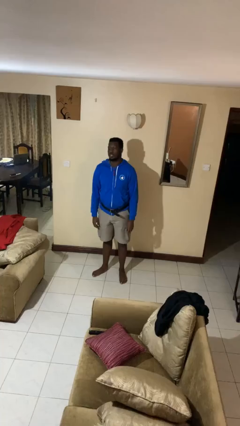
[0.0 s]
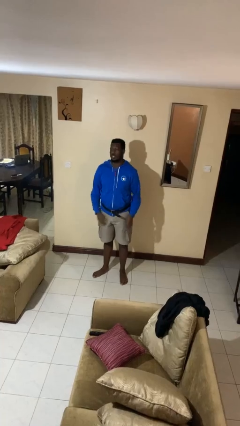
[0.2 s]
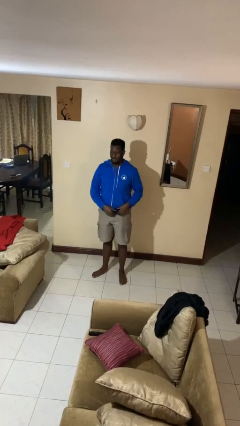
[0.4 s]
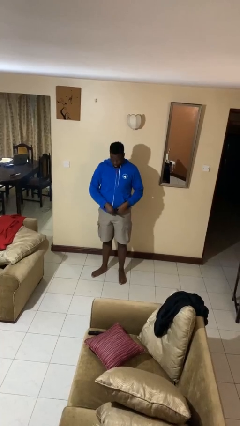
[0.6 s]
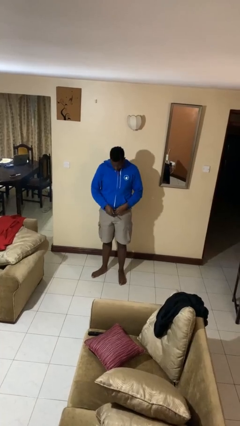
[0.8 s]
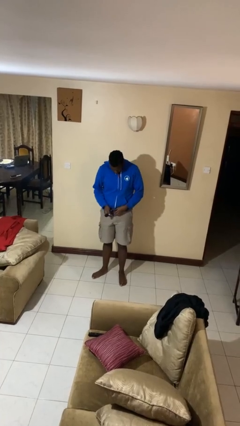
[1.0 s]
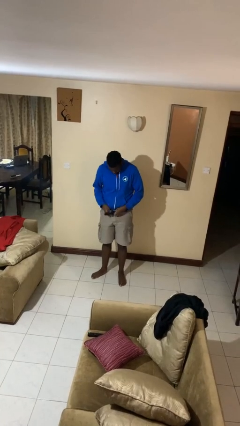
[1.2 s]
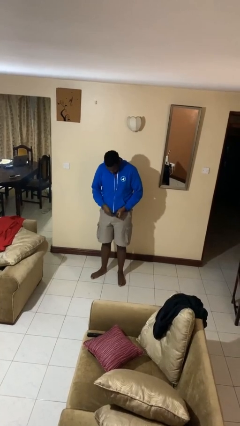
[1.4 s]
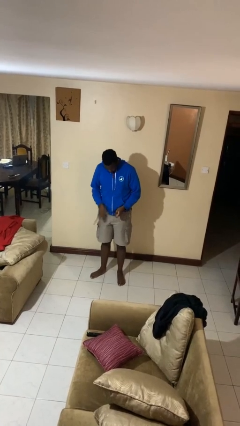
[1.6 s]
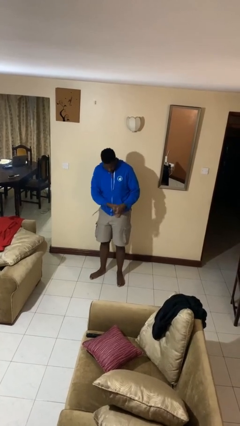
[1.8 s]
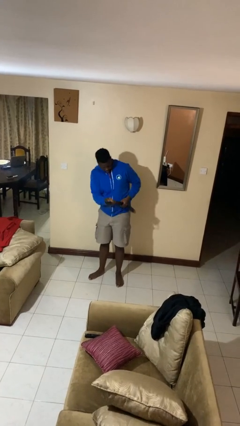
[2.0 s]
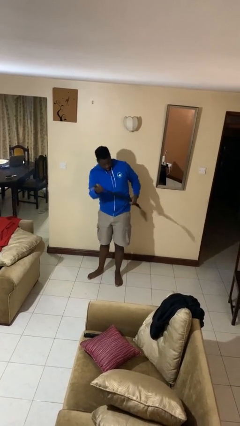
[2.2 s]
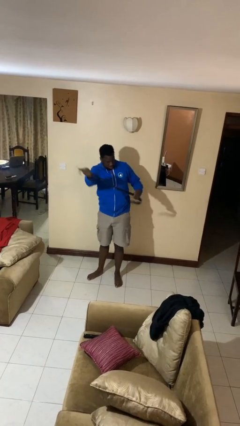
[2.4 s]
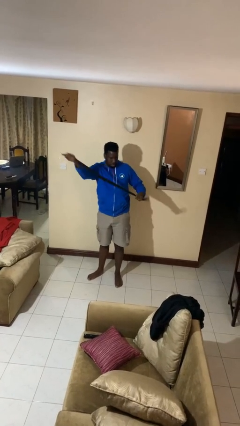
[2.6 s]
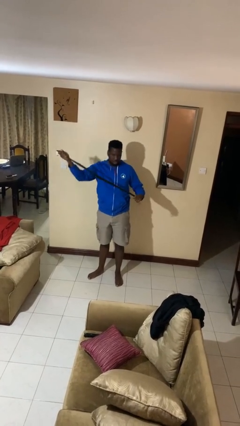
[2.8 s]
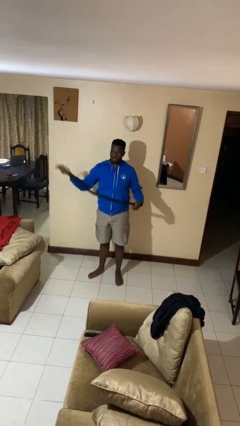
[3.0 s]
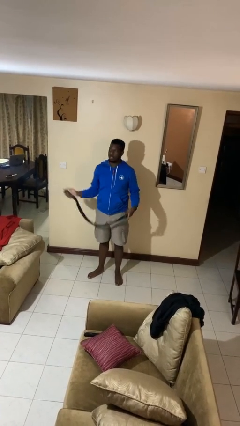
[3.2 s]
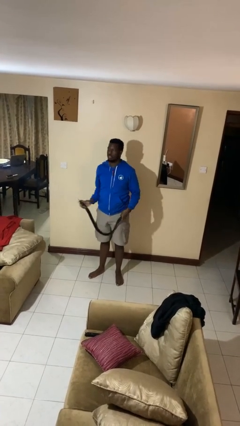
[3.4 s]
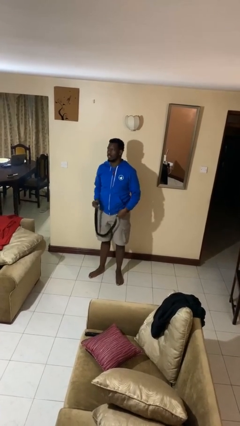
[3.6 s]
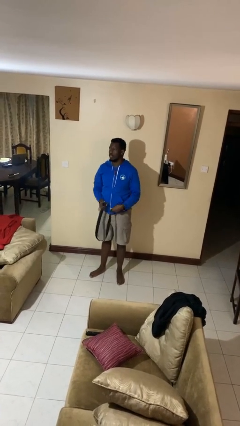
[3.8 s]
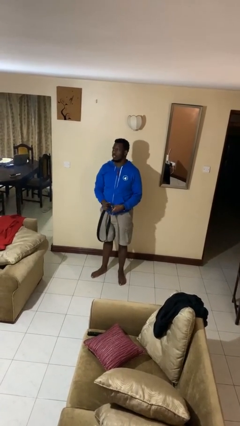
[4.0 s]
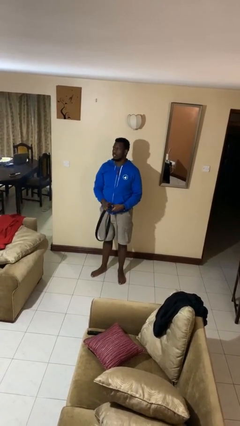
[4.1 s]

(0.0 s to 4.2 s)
person takes off belt

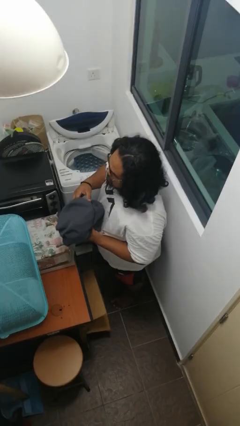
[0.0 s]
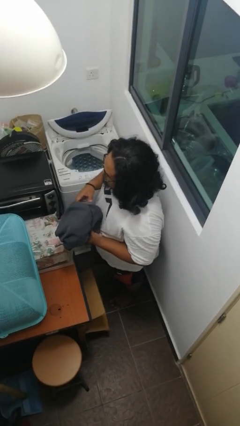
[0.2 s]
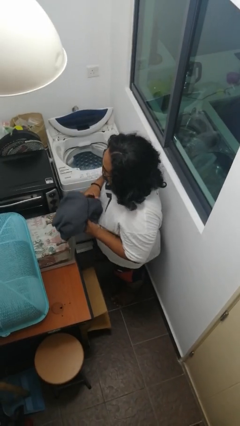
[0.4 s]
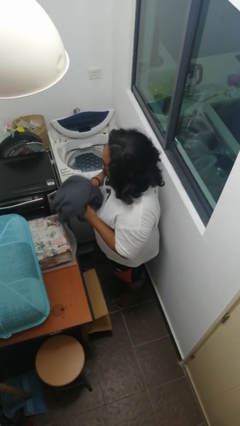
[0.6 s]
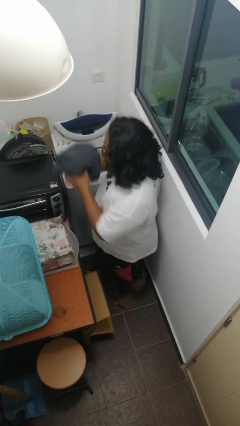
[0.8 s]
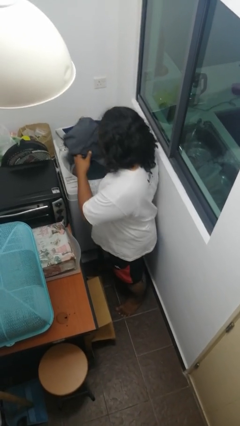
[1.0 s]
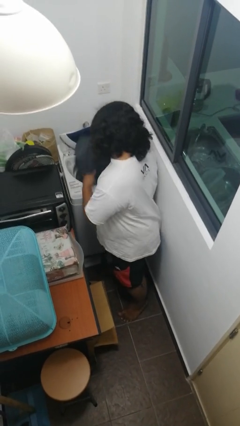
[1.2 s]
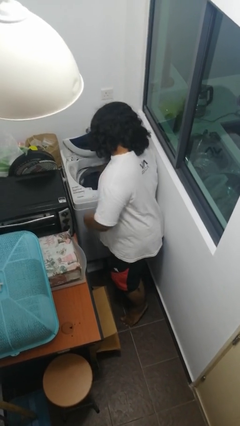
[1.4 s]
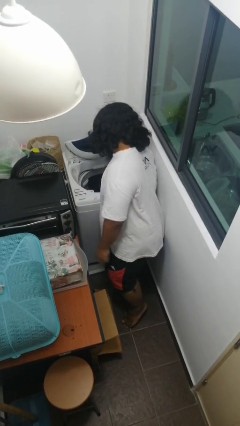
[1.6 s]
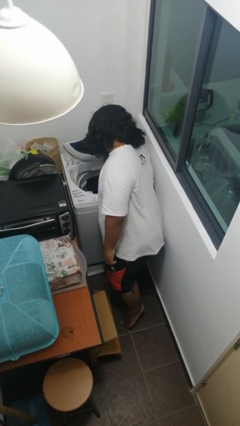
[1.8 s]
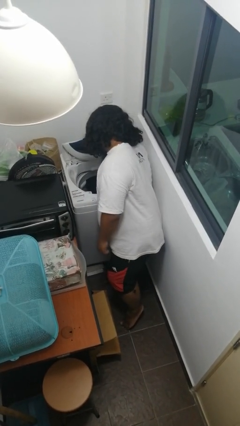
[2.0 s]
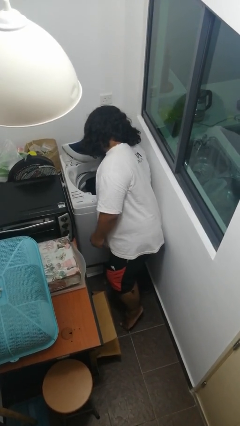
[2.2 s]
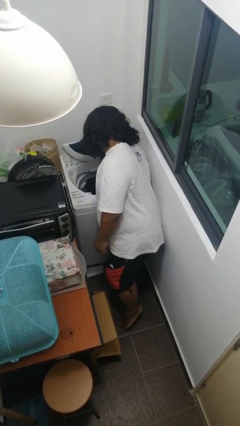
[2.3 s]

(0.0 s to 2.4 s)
person loads clotheswasher

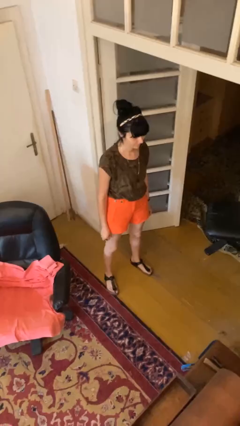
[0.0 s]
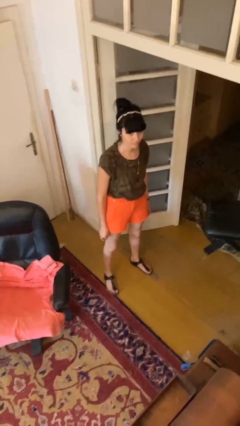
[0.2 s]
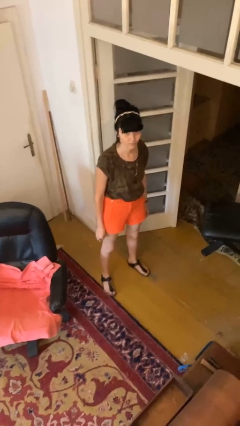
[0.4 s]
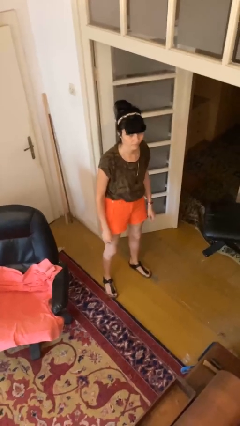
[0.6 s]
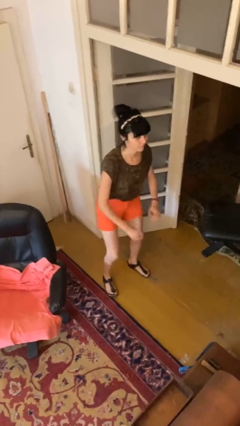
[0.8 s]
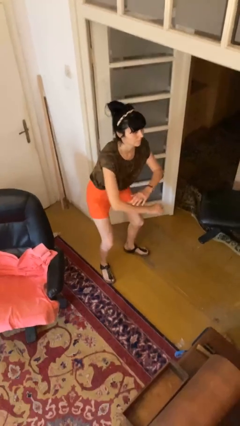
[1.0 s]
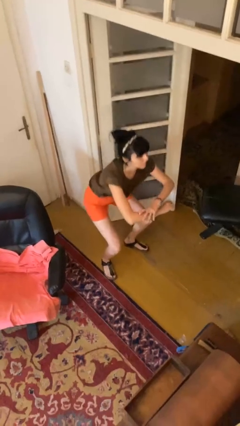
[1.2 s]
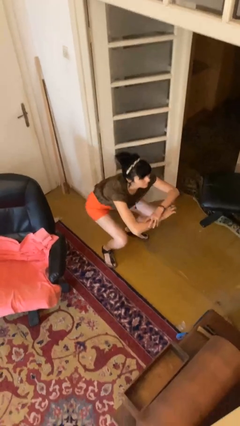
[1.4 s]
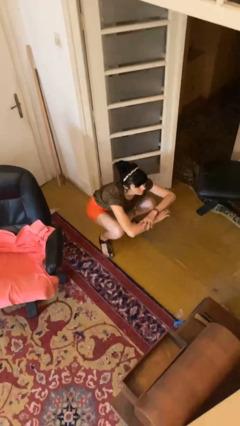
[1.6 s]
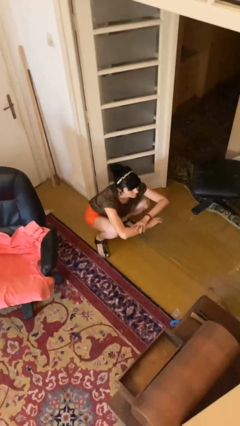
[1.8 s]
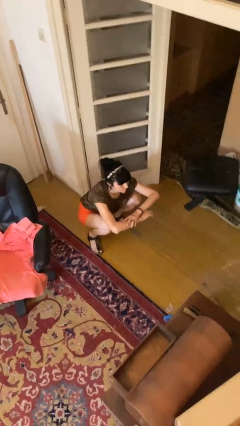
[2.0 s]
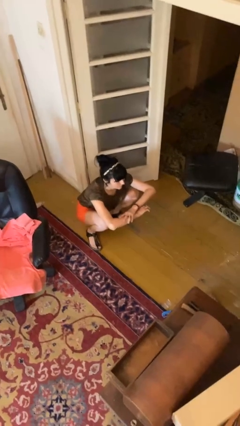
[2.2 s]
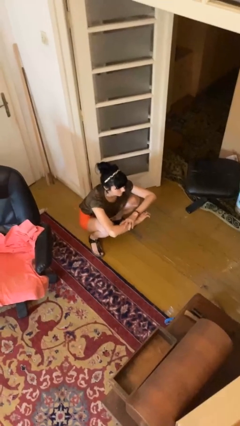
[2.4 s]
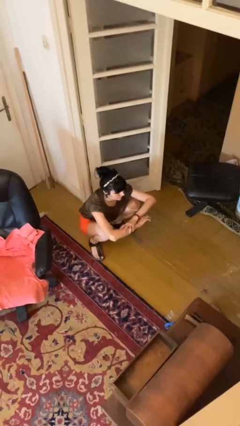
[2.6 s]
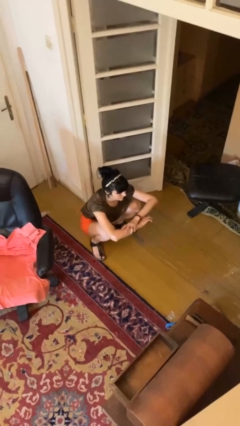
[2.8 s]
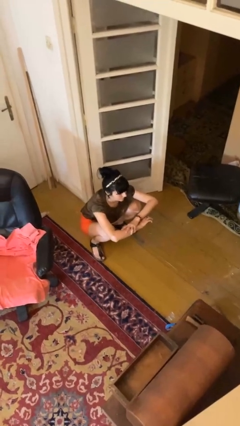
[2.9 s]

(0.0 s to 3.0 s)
person squats

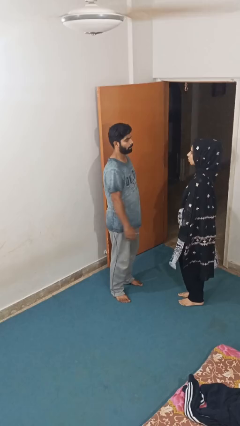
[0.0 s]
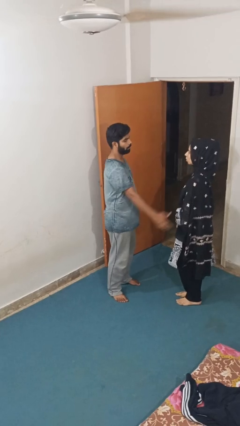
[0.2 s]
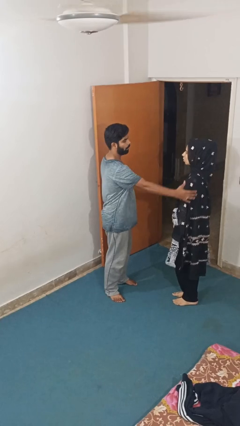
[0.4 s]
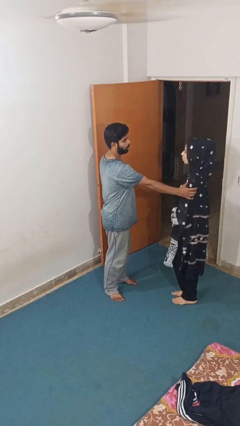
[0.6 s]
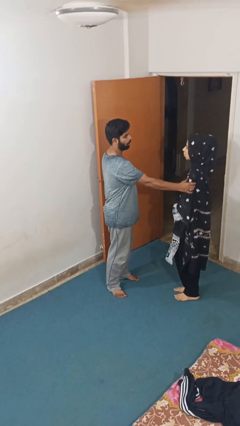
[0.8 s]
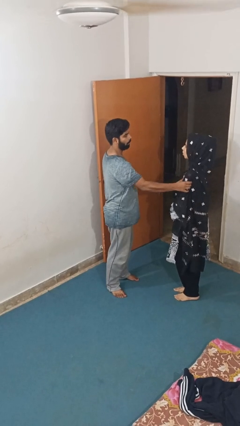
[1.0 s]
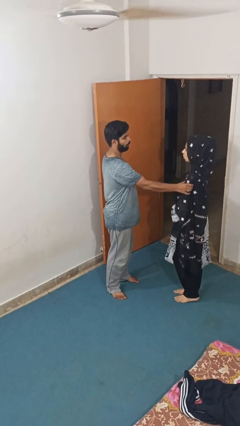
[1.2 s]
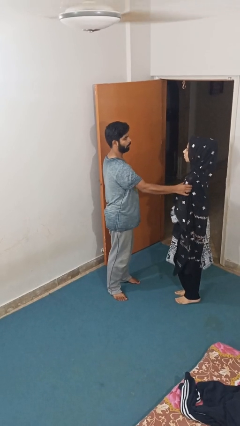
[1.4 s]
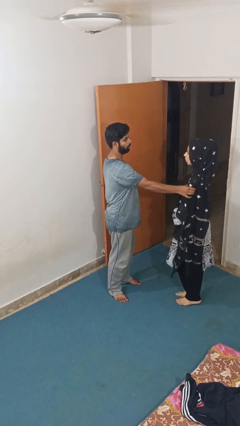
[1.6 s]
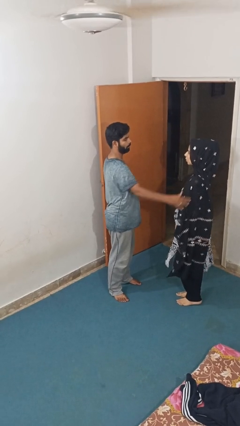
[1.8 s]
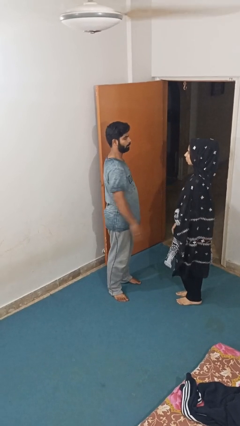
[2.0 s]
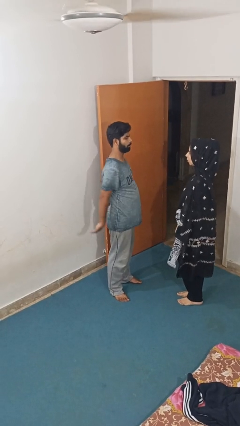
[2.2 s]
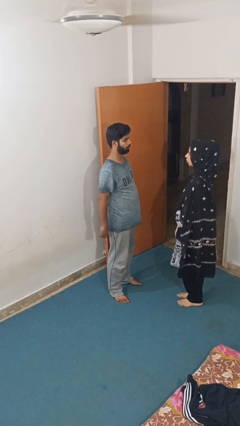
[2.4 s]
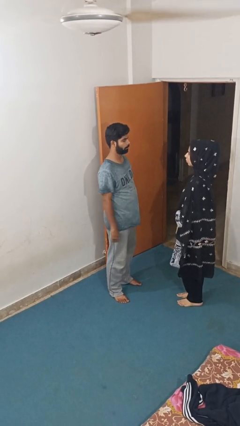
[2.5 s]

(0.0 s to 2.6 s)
person grabs person by bicep

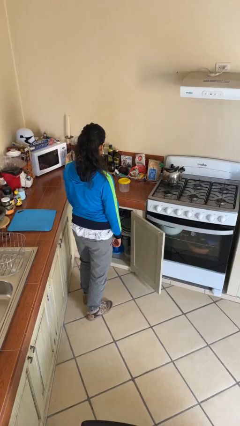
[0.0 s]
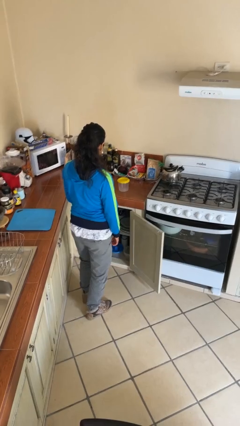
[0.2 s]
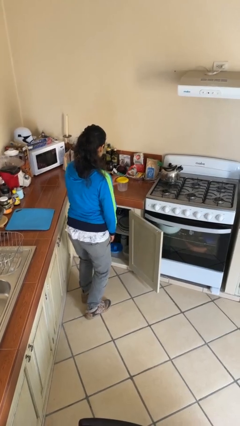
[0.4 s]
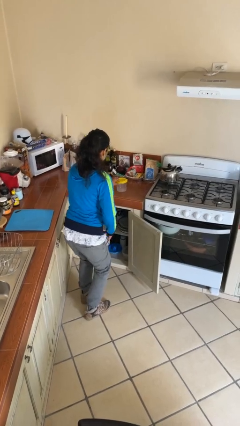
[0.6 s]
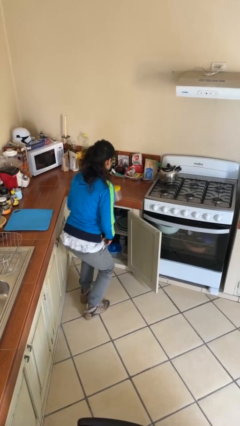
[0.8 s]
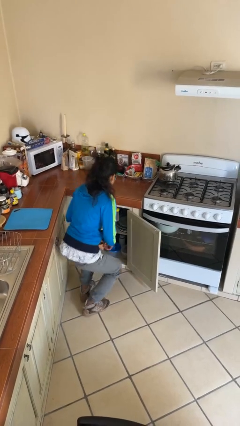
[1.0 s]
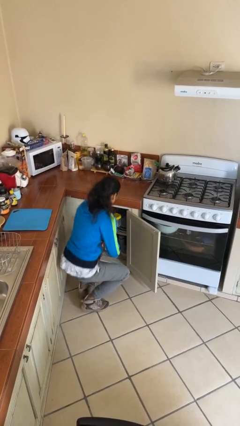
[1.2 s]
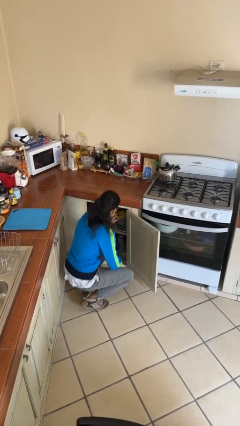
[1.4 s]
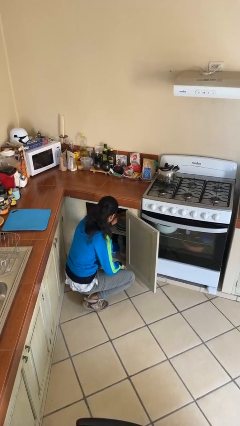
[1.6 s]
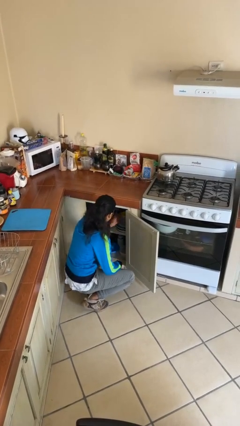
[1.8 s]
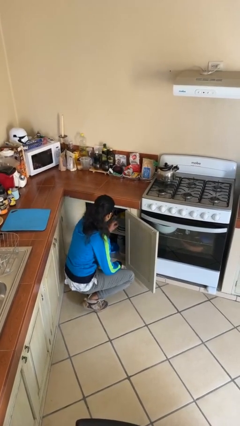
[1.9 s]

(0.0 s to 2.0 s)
person puts object in cabinet

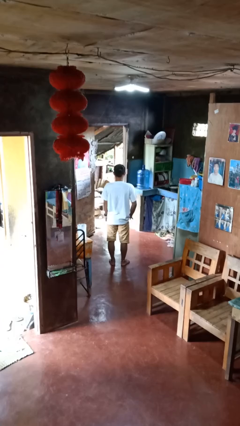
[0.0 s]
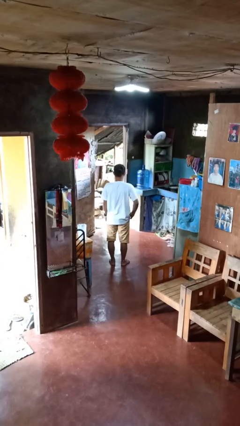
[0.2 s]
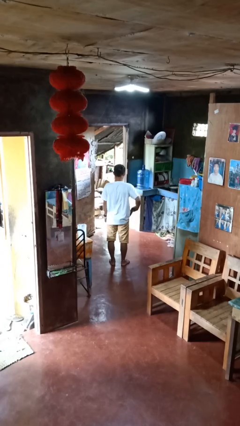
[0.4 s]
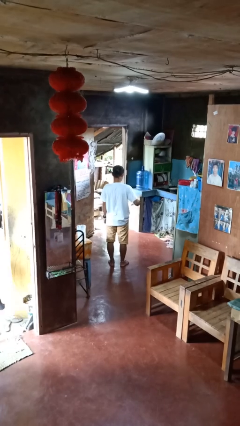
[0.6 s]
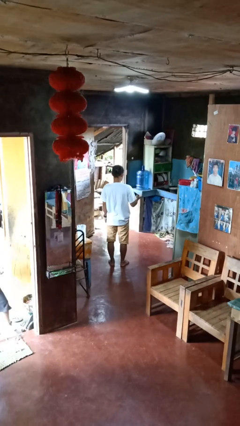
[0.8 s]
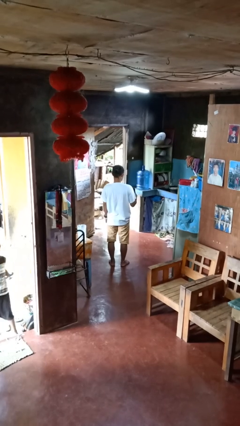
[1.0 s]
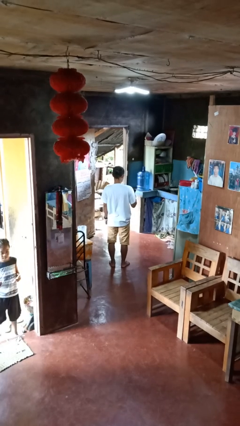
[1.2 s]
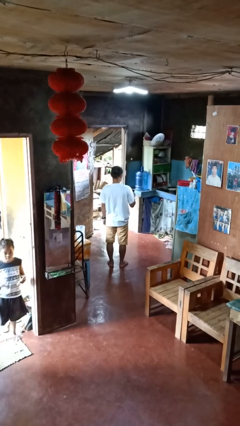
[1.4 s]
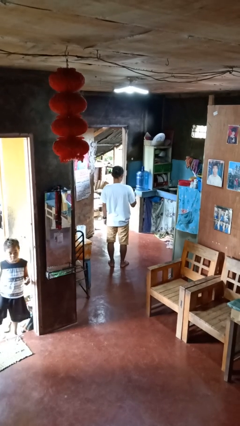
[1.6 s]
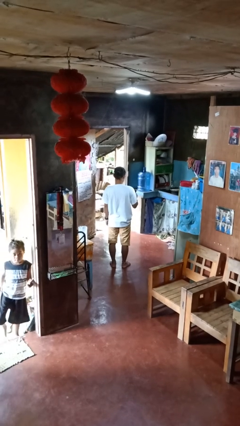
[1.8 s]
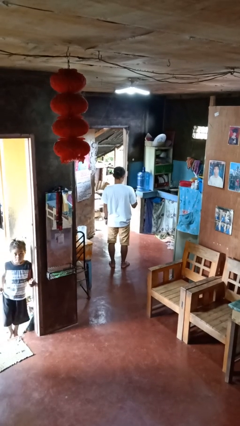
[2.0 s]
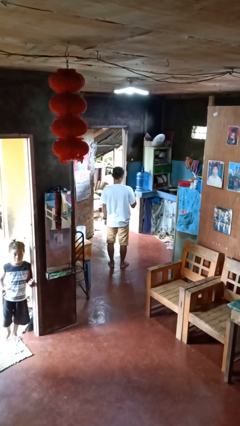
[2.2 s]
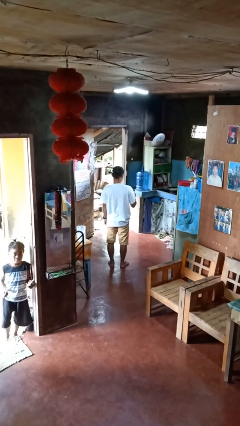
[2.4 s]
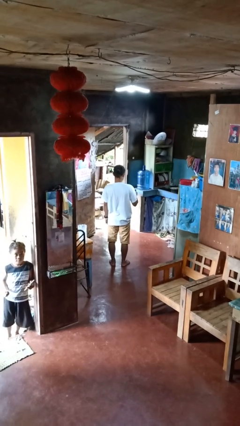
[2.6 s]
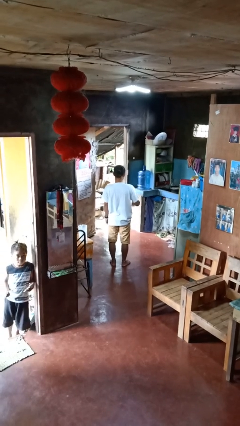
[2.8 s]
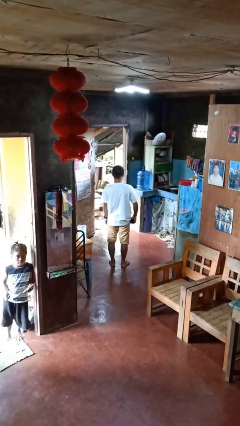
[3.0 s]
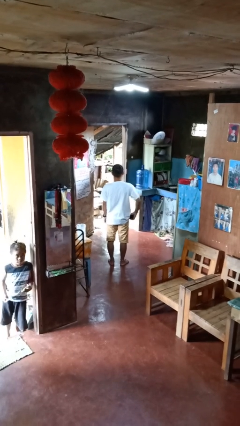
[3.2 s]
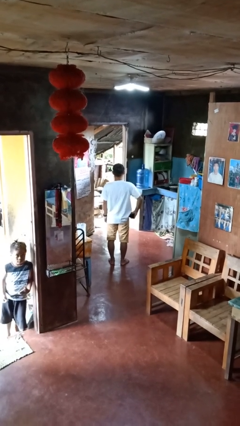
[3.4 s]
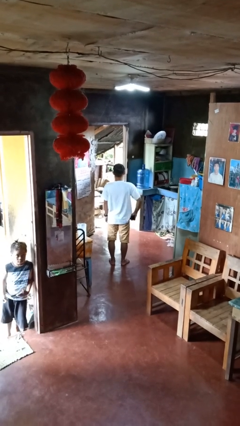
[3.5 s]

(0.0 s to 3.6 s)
person takes phone from pocket
